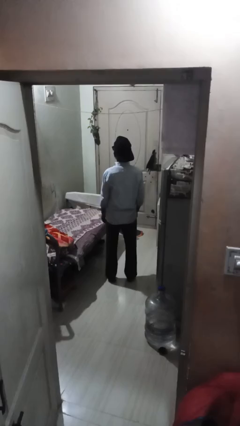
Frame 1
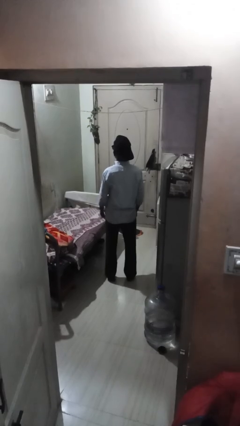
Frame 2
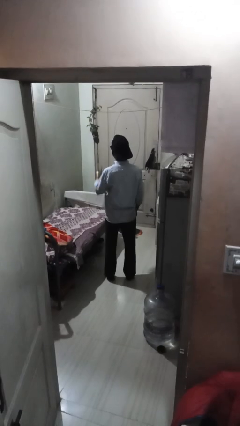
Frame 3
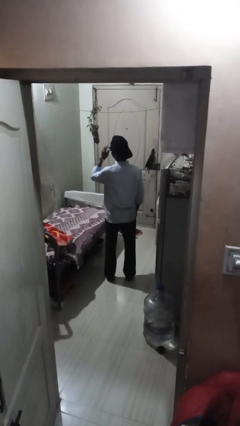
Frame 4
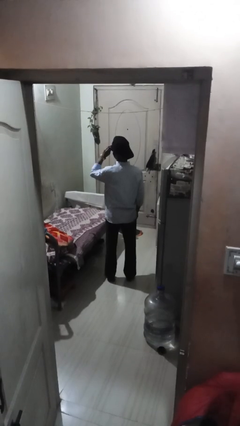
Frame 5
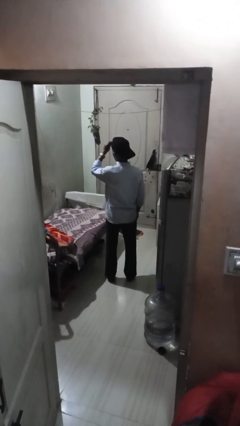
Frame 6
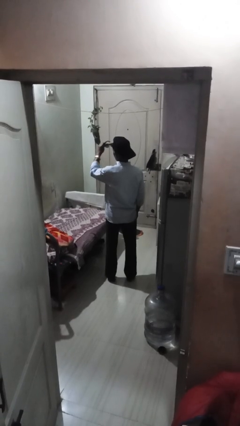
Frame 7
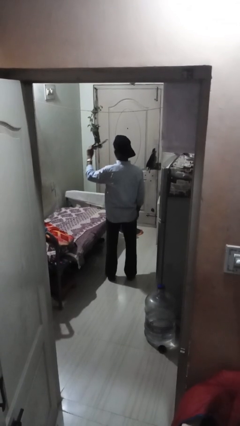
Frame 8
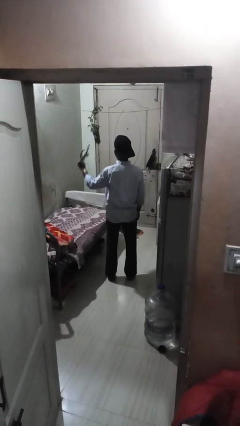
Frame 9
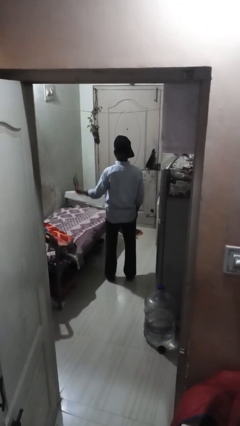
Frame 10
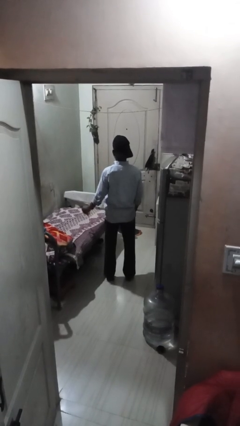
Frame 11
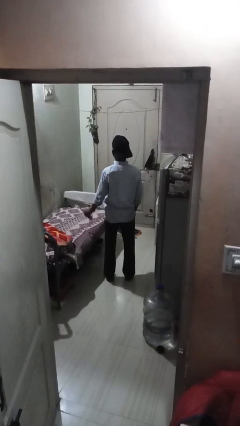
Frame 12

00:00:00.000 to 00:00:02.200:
person takes off sunglasses

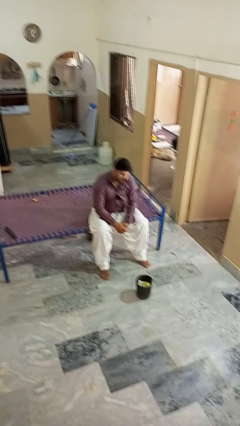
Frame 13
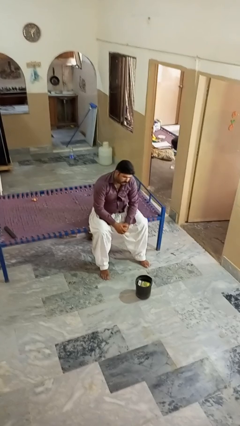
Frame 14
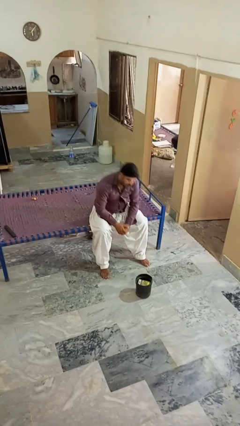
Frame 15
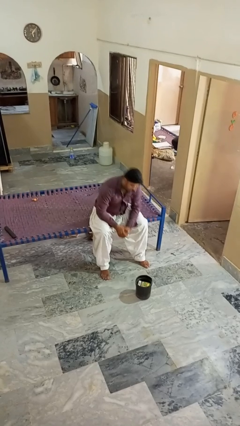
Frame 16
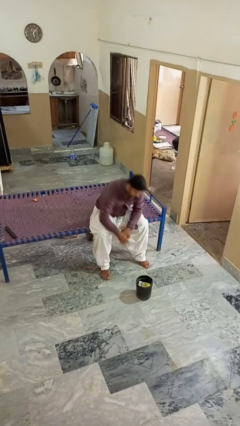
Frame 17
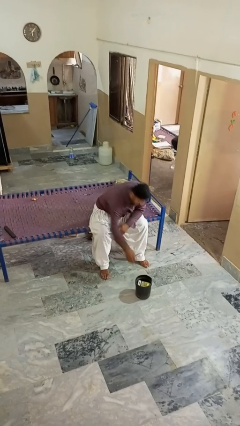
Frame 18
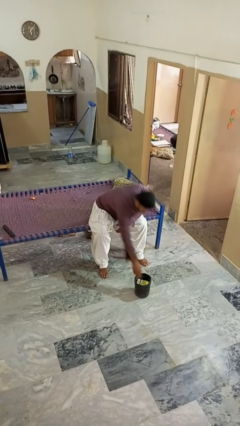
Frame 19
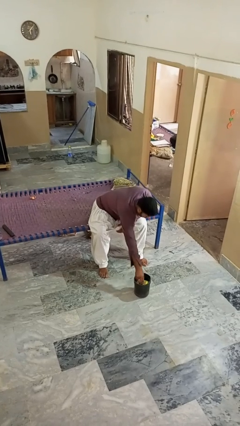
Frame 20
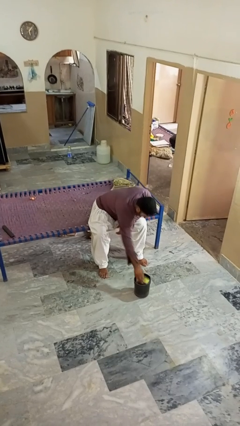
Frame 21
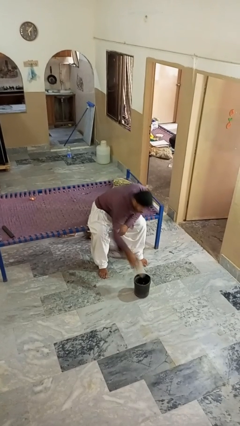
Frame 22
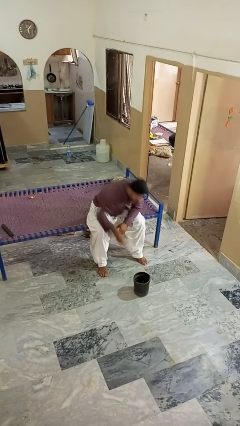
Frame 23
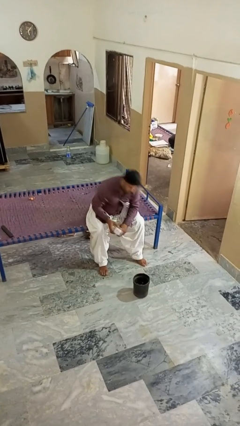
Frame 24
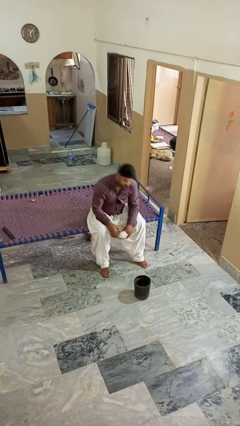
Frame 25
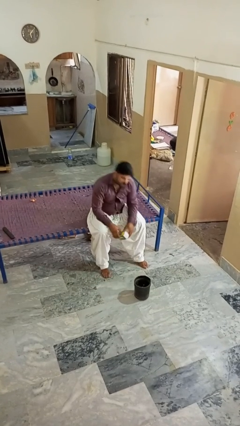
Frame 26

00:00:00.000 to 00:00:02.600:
person takes object from basket

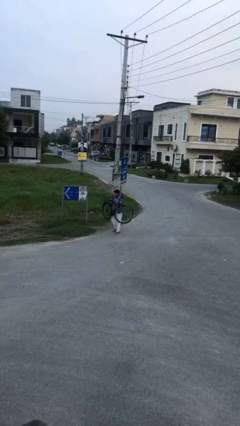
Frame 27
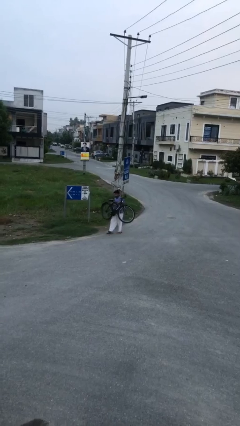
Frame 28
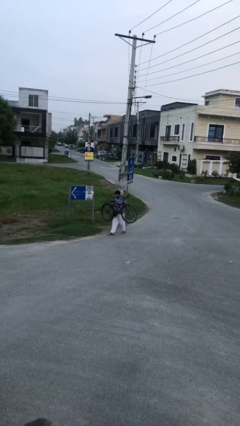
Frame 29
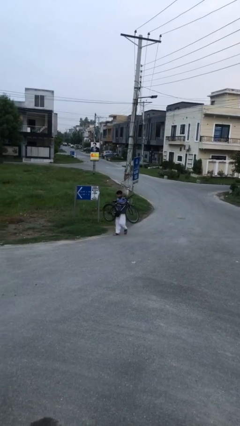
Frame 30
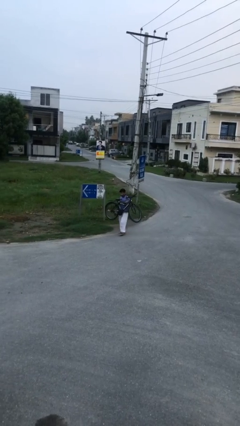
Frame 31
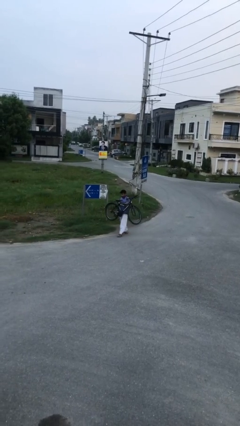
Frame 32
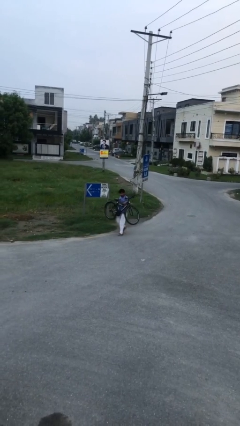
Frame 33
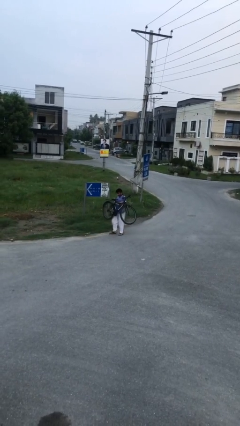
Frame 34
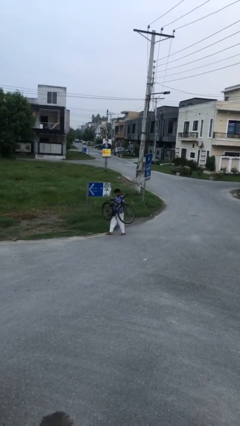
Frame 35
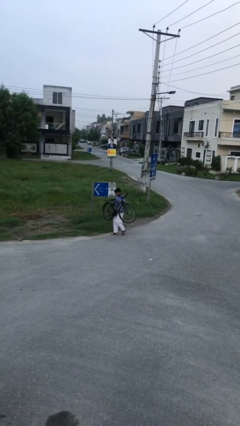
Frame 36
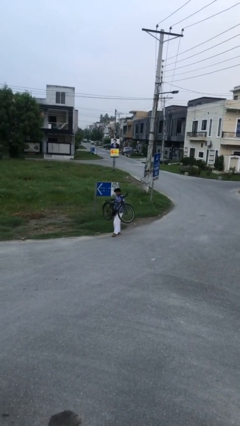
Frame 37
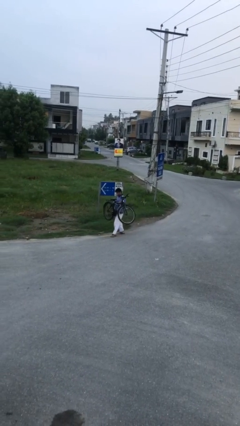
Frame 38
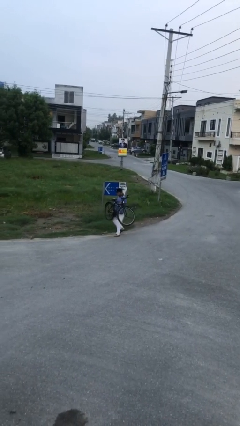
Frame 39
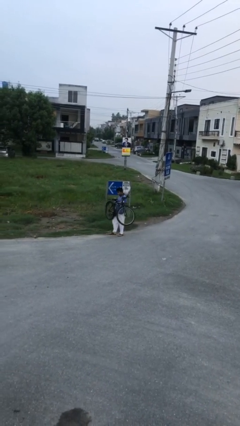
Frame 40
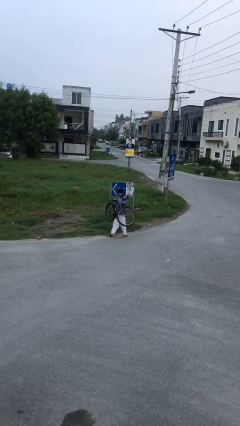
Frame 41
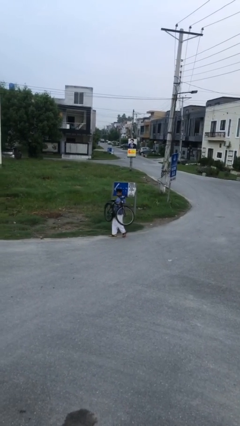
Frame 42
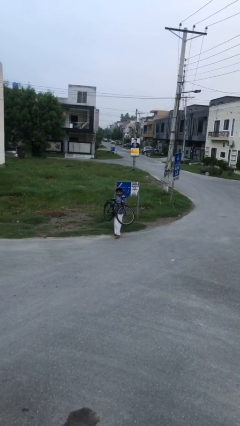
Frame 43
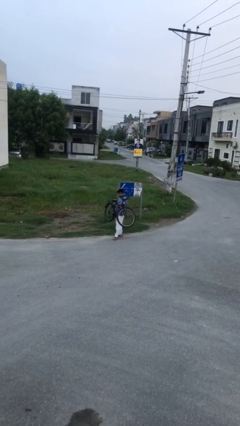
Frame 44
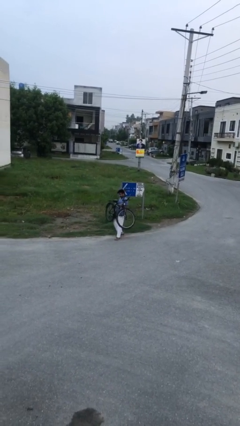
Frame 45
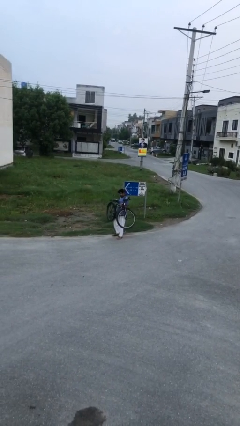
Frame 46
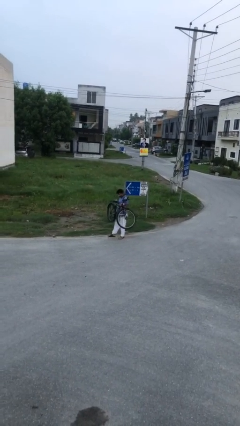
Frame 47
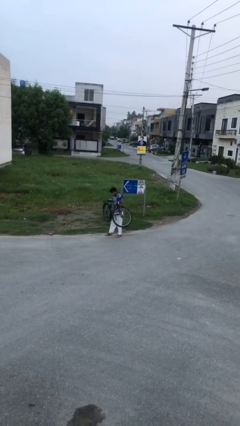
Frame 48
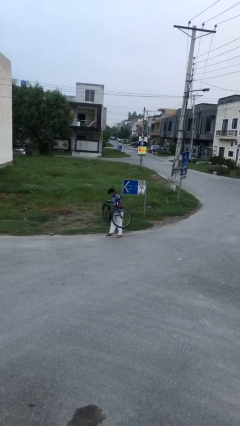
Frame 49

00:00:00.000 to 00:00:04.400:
person carries heavy object

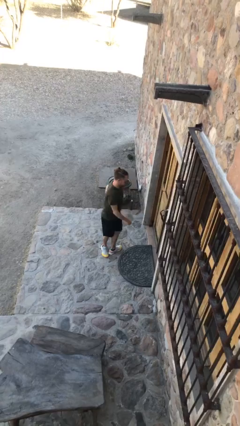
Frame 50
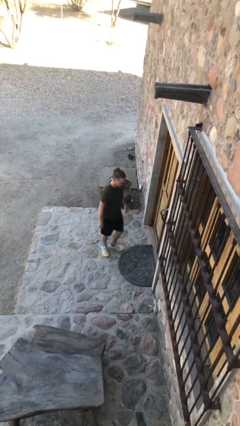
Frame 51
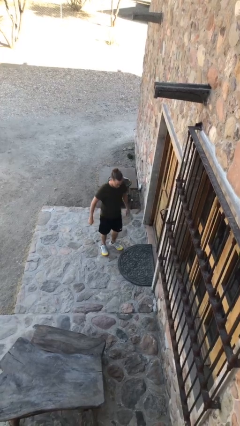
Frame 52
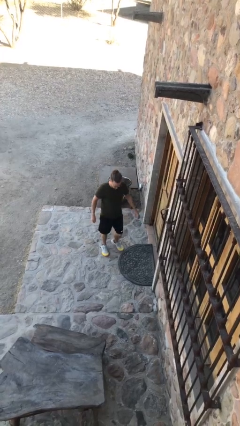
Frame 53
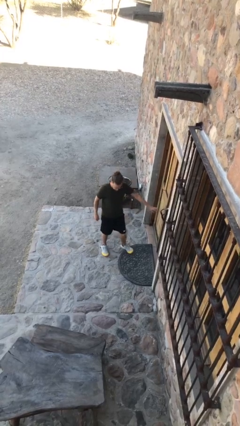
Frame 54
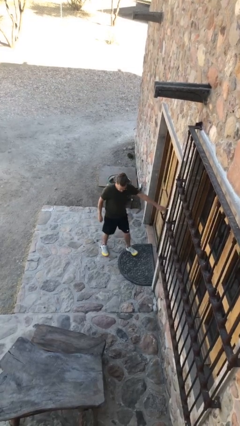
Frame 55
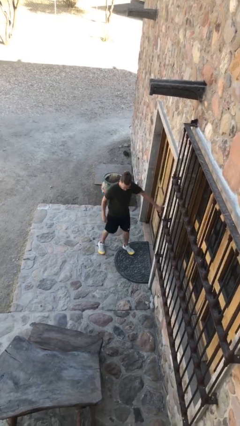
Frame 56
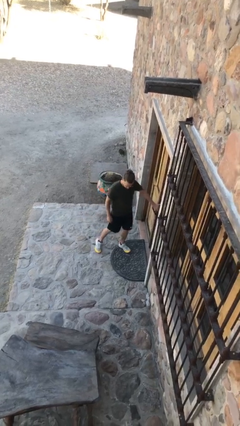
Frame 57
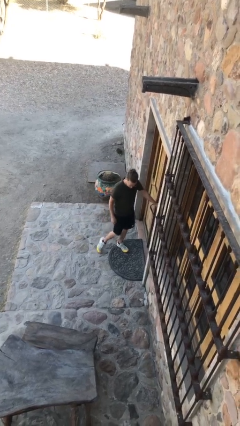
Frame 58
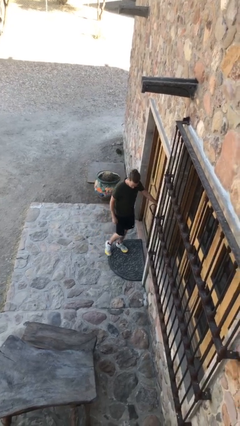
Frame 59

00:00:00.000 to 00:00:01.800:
person opens facility door

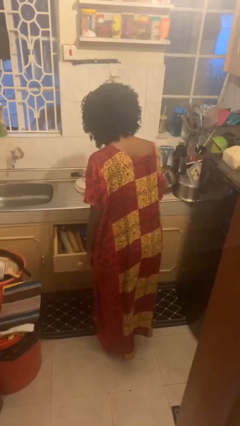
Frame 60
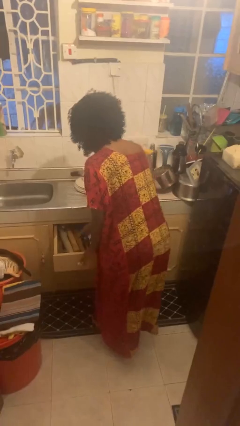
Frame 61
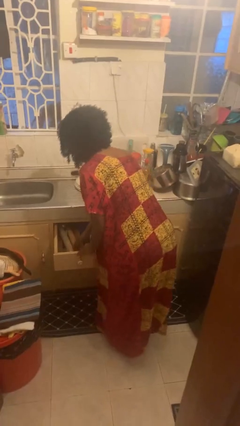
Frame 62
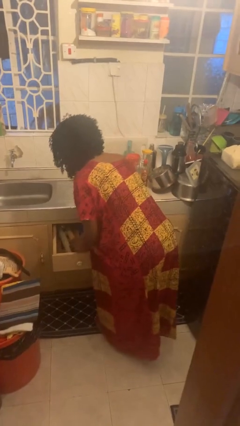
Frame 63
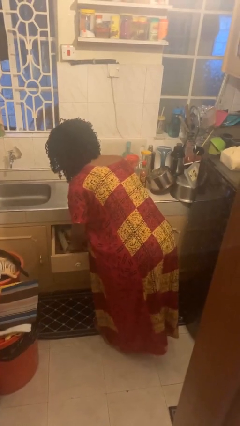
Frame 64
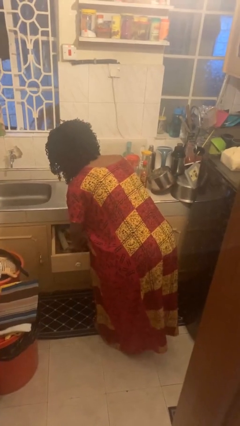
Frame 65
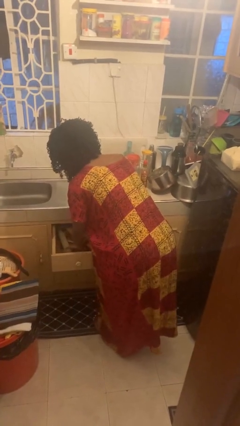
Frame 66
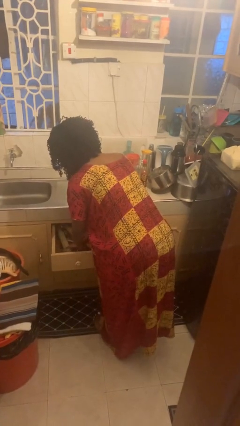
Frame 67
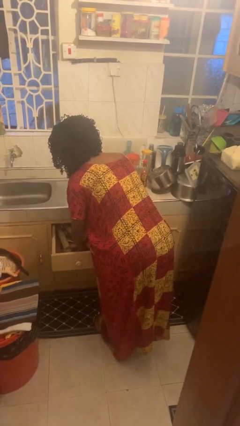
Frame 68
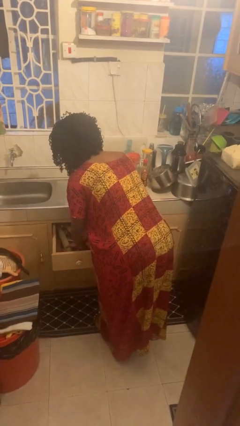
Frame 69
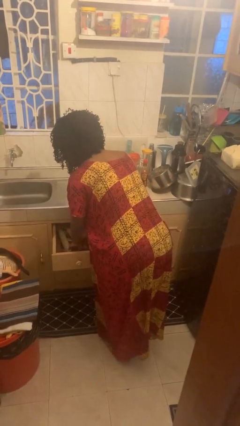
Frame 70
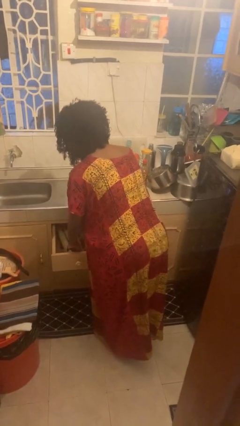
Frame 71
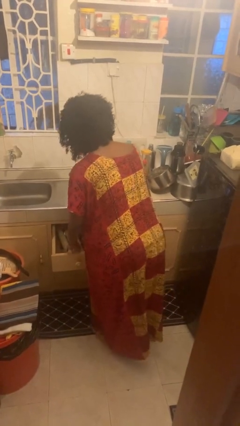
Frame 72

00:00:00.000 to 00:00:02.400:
person searches in kitchen drawer

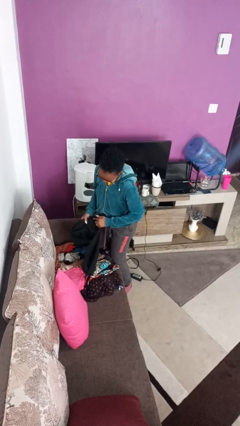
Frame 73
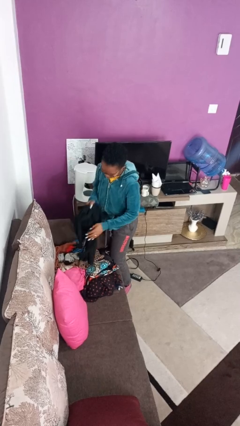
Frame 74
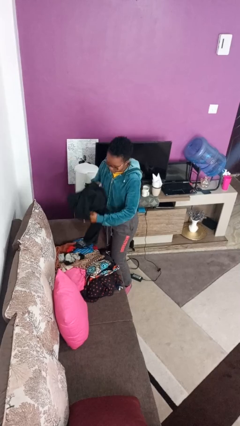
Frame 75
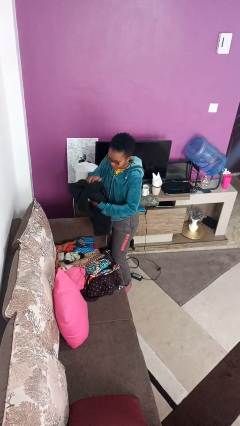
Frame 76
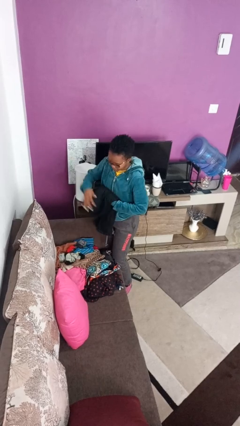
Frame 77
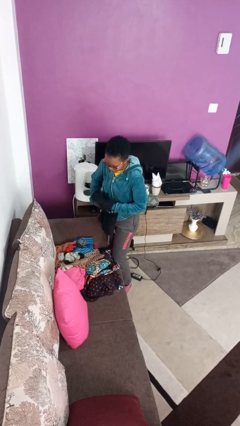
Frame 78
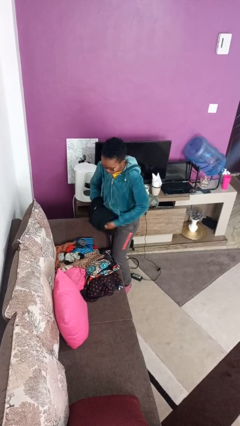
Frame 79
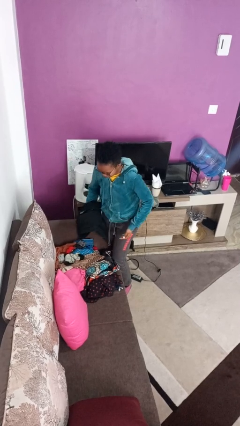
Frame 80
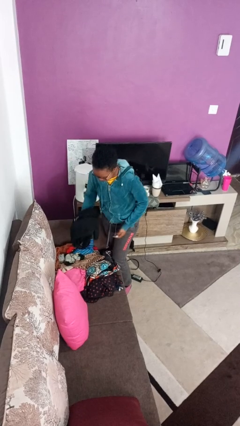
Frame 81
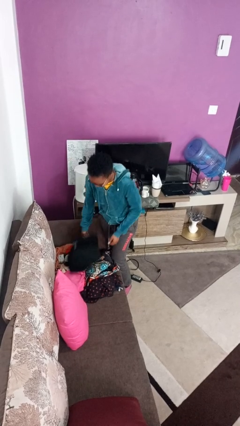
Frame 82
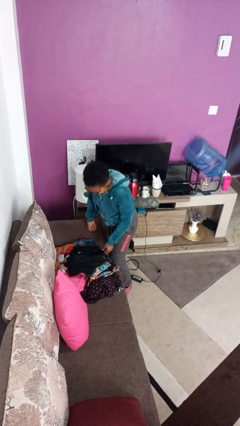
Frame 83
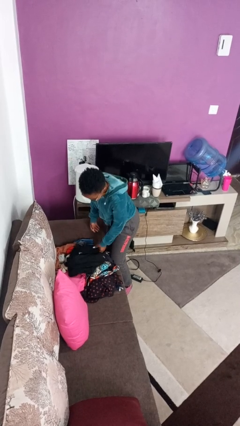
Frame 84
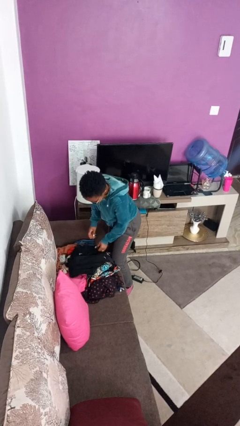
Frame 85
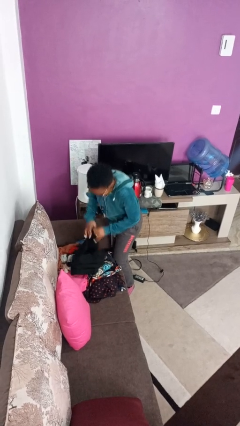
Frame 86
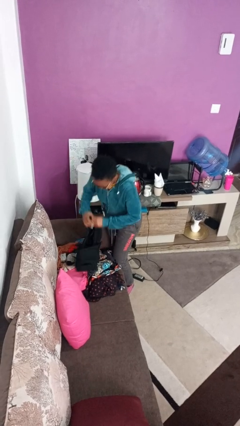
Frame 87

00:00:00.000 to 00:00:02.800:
person folds pants

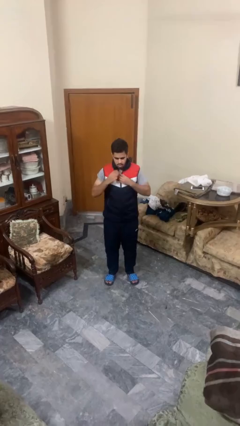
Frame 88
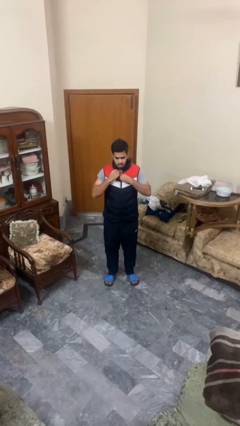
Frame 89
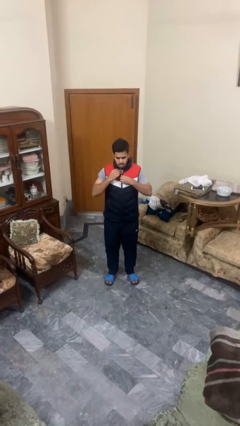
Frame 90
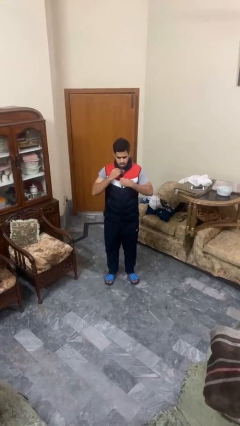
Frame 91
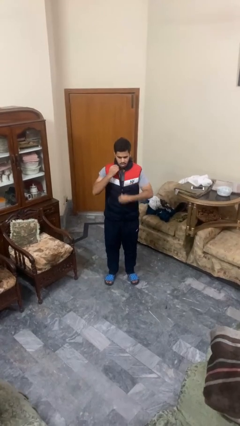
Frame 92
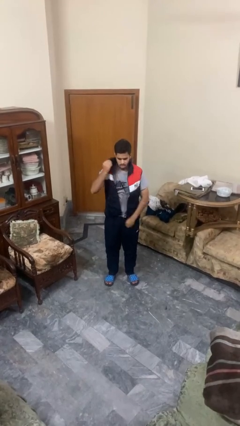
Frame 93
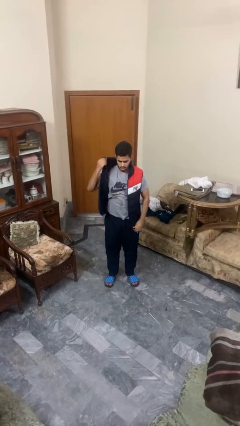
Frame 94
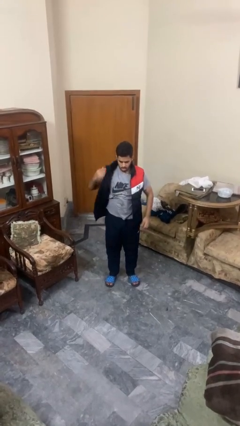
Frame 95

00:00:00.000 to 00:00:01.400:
person unzips jacket
